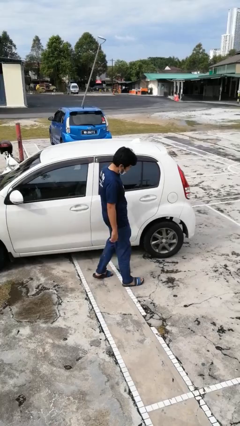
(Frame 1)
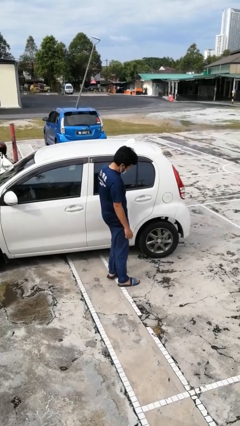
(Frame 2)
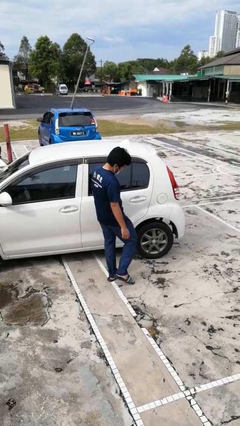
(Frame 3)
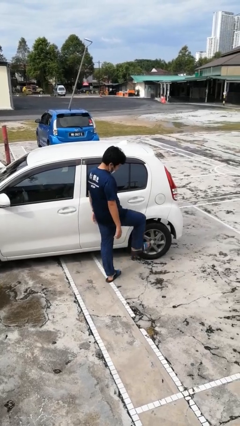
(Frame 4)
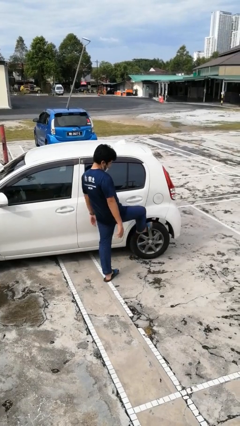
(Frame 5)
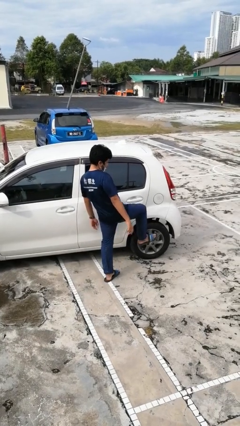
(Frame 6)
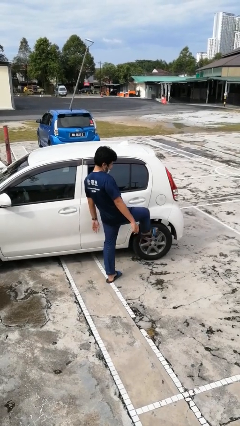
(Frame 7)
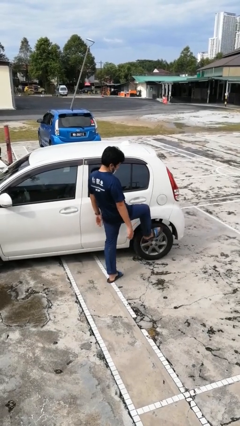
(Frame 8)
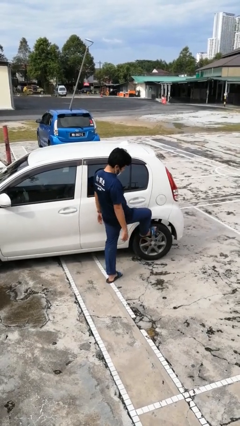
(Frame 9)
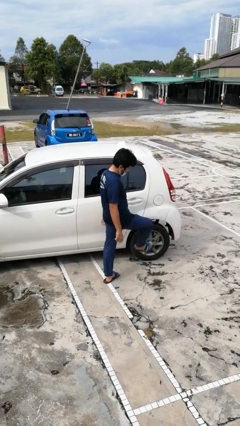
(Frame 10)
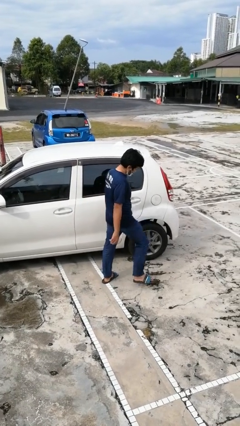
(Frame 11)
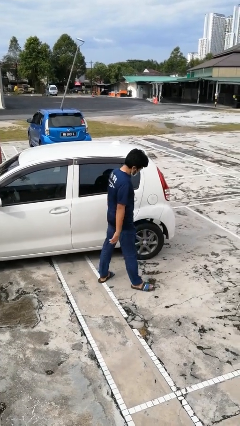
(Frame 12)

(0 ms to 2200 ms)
person kicks car tires

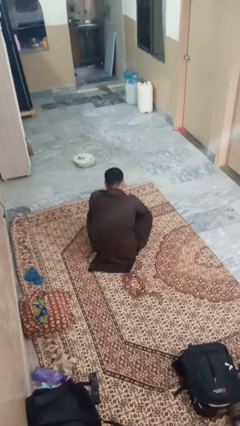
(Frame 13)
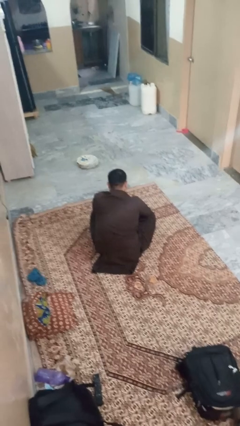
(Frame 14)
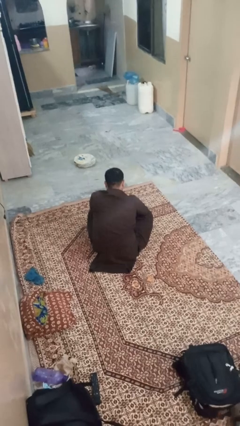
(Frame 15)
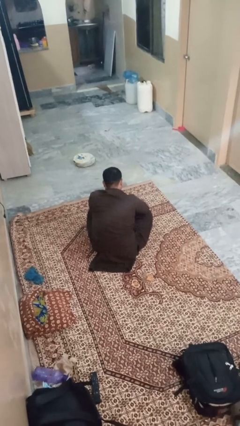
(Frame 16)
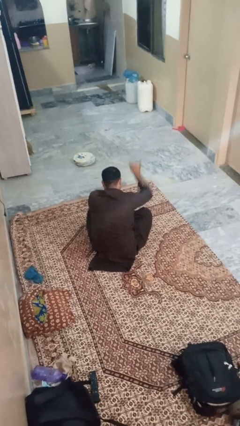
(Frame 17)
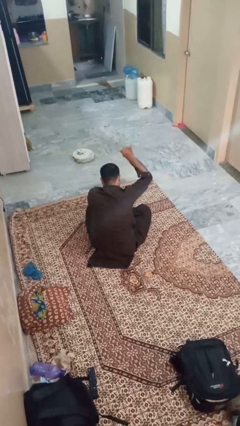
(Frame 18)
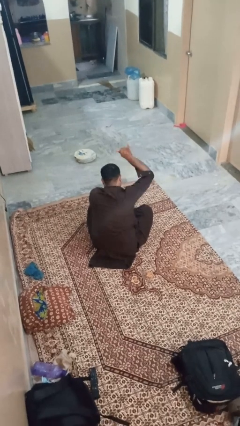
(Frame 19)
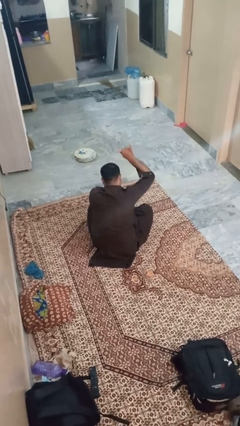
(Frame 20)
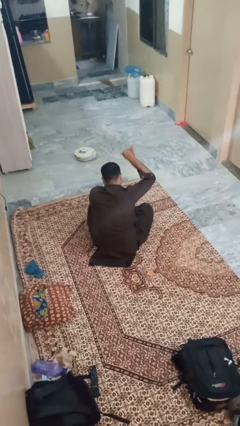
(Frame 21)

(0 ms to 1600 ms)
person gestures hang loose

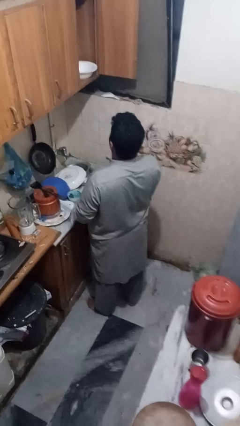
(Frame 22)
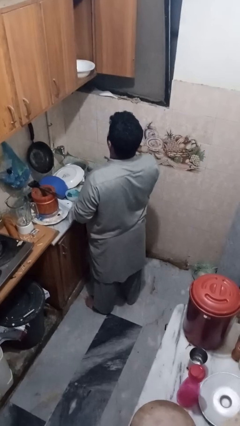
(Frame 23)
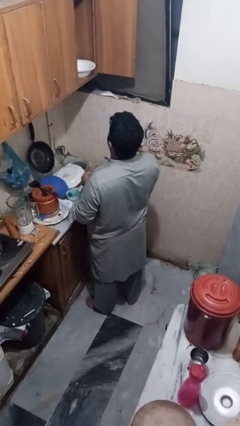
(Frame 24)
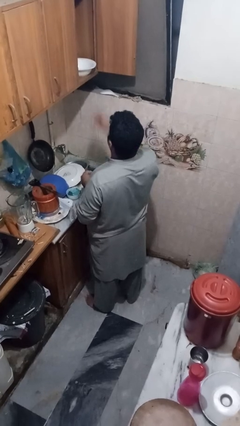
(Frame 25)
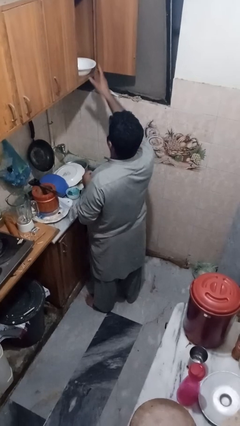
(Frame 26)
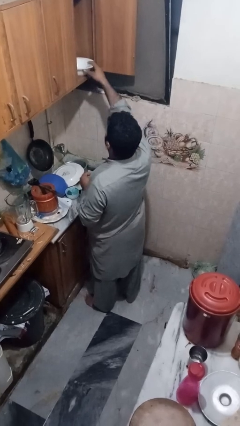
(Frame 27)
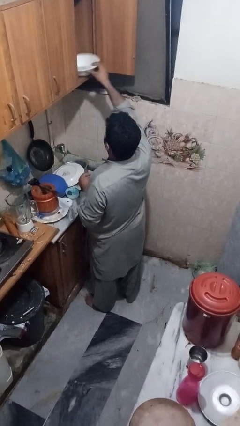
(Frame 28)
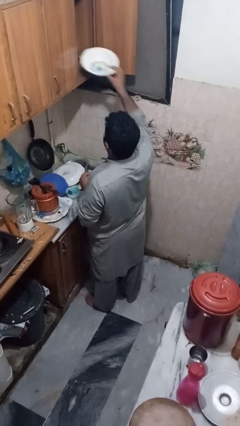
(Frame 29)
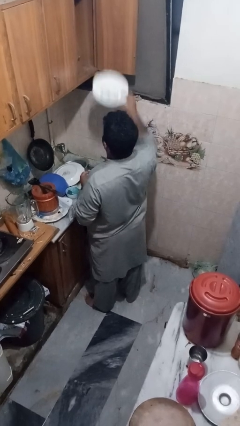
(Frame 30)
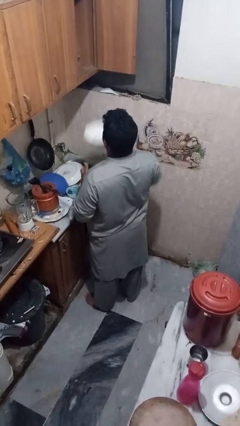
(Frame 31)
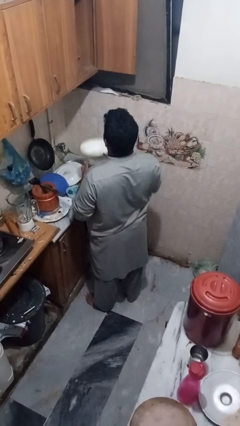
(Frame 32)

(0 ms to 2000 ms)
person takes object from cabinet

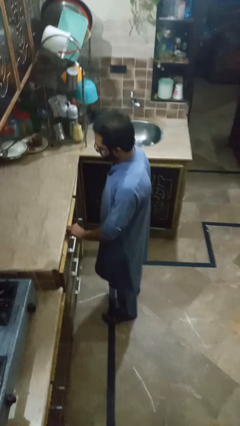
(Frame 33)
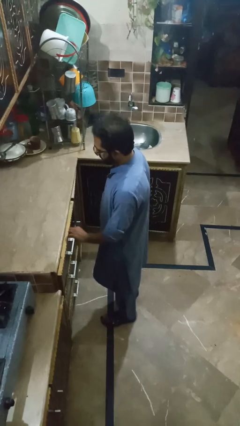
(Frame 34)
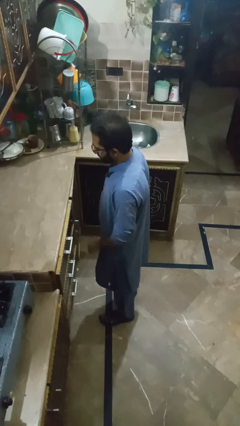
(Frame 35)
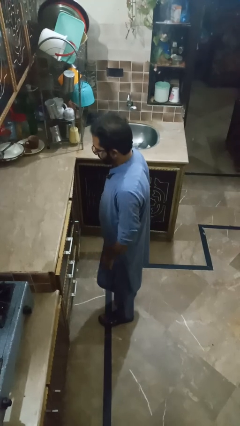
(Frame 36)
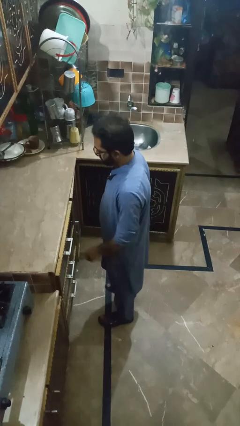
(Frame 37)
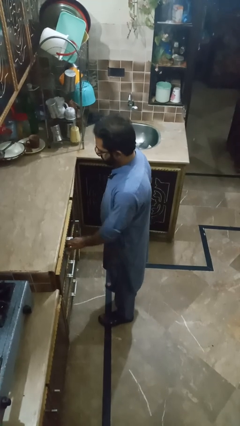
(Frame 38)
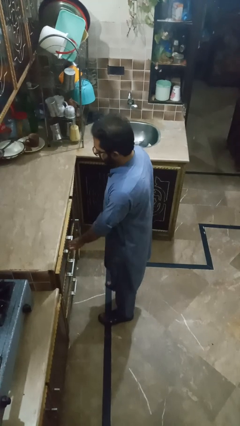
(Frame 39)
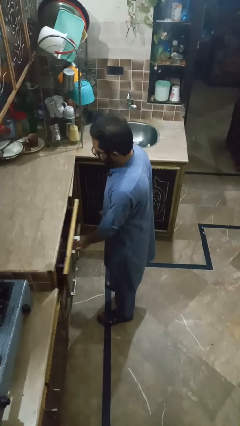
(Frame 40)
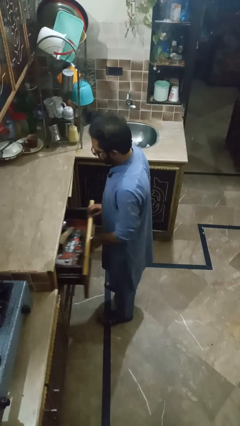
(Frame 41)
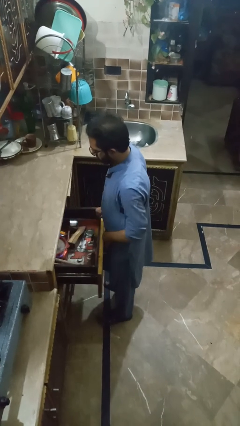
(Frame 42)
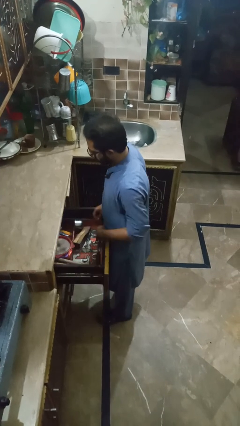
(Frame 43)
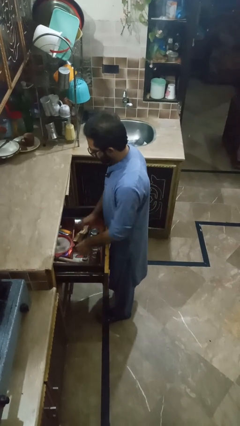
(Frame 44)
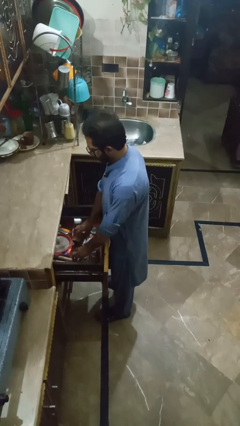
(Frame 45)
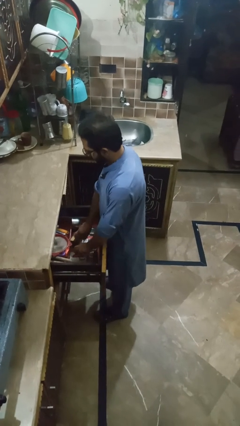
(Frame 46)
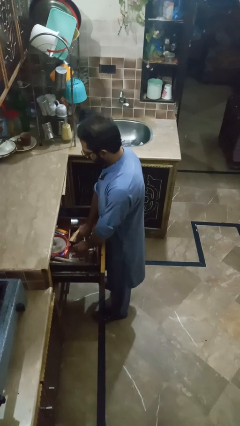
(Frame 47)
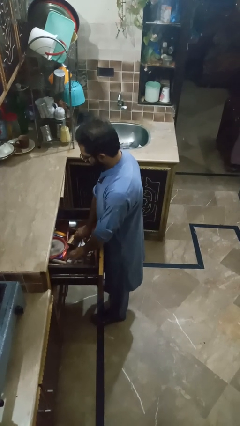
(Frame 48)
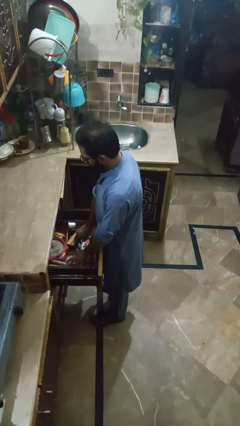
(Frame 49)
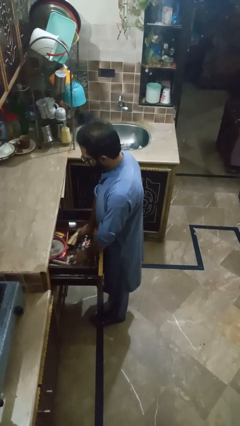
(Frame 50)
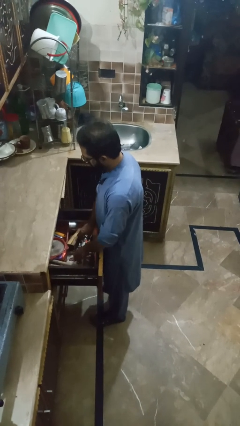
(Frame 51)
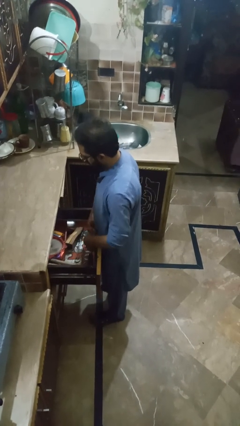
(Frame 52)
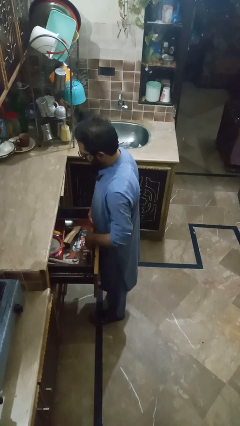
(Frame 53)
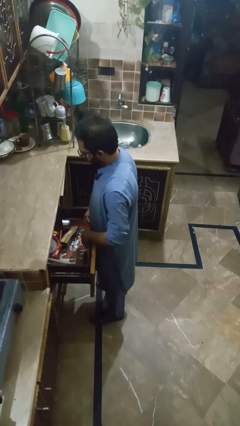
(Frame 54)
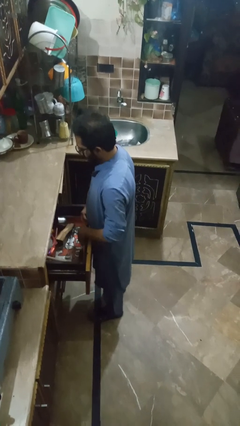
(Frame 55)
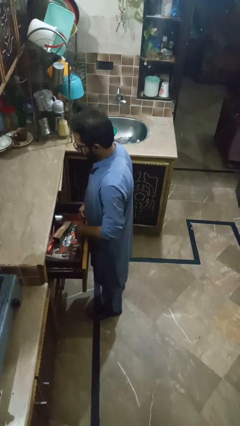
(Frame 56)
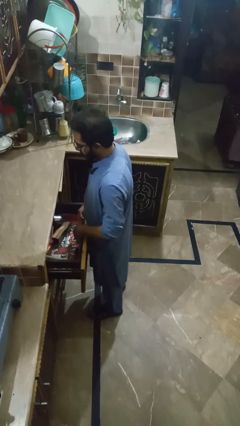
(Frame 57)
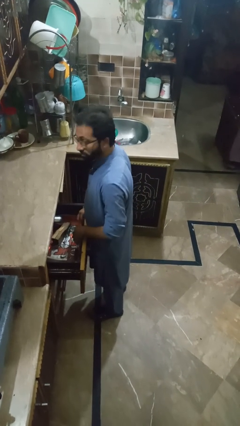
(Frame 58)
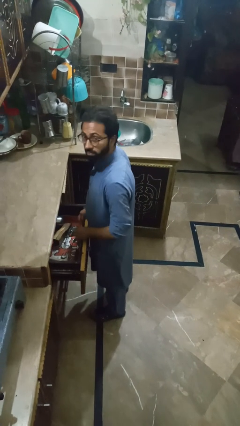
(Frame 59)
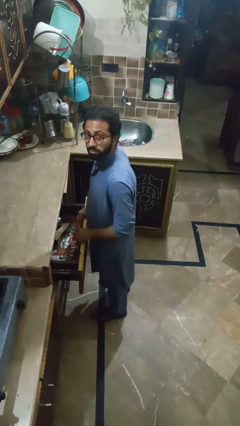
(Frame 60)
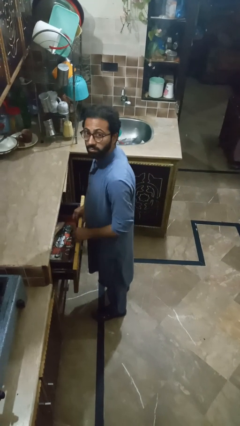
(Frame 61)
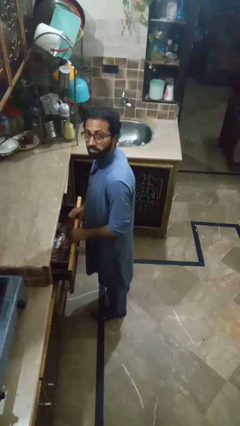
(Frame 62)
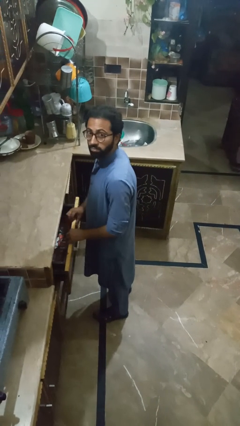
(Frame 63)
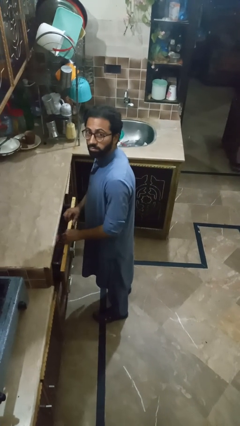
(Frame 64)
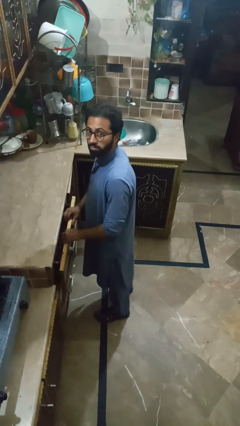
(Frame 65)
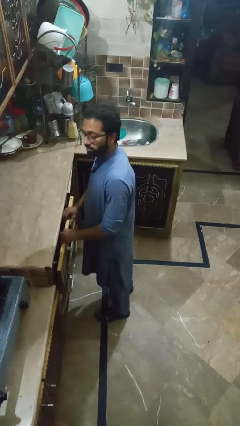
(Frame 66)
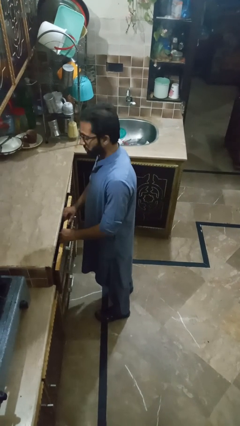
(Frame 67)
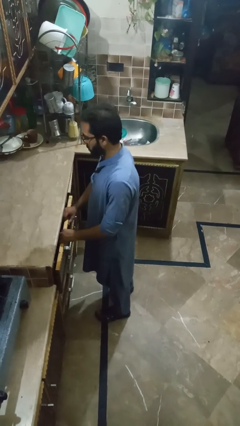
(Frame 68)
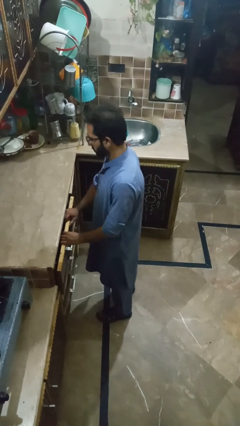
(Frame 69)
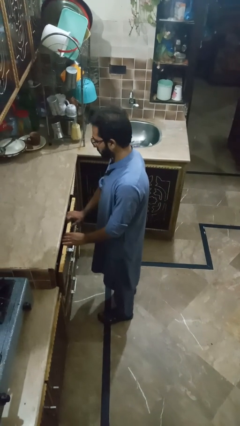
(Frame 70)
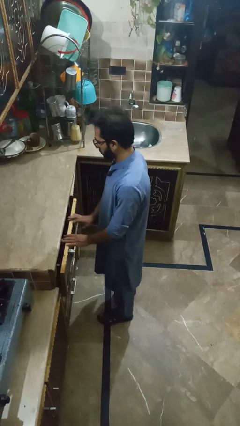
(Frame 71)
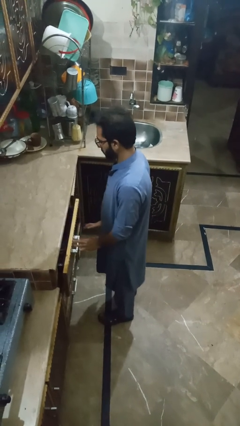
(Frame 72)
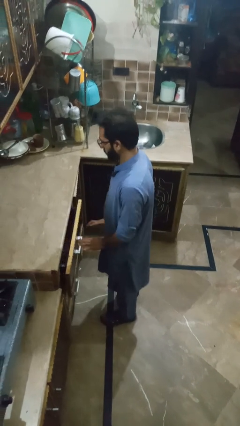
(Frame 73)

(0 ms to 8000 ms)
person searches in kitchen drawer

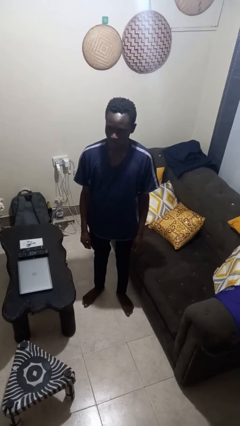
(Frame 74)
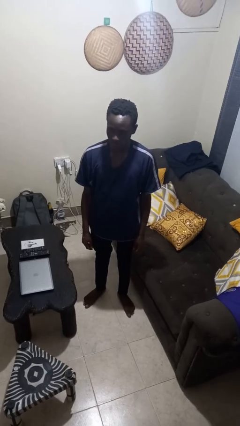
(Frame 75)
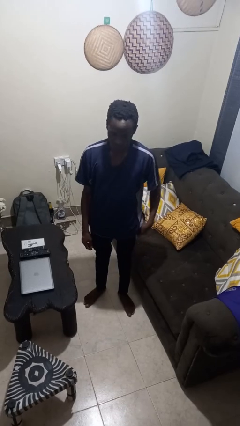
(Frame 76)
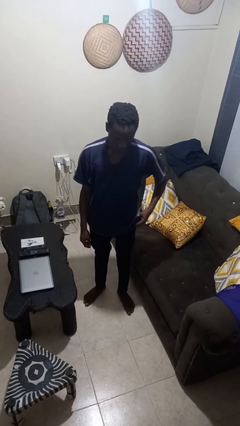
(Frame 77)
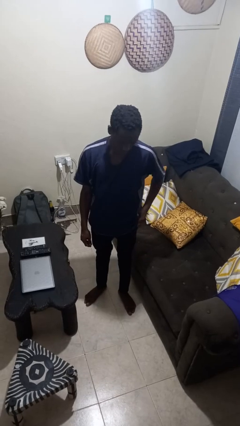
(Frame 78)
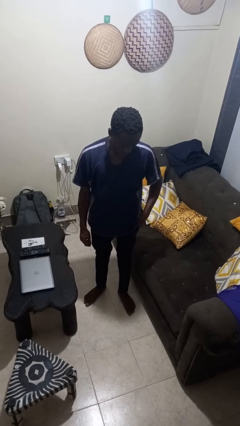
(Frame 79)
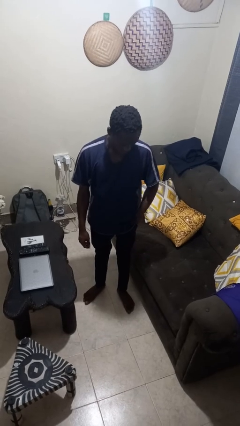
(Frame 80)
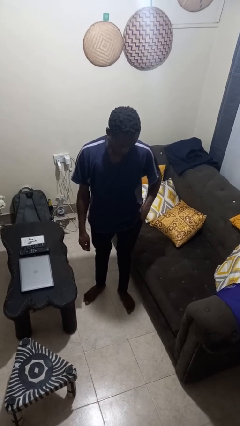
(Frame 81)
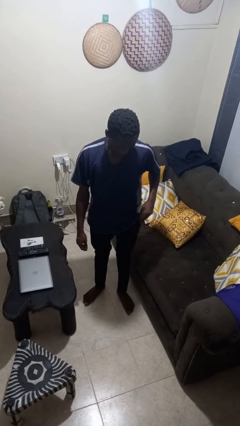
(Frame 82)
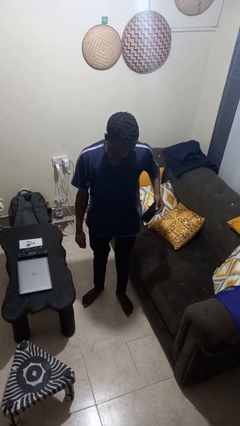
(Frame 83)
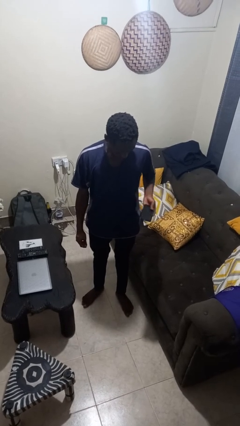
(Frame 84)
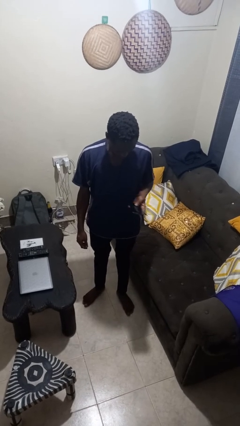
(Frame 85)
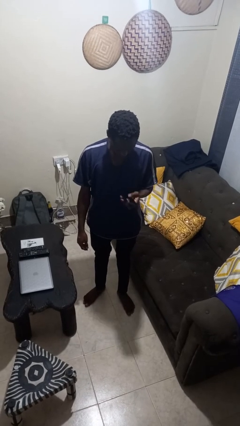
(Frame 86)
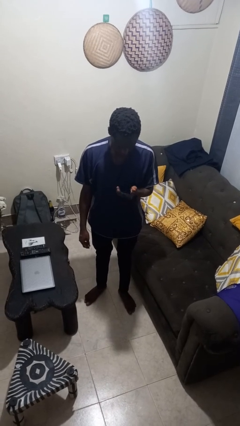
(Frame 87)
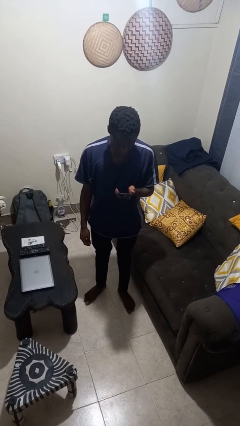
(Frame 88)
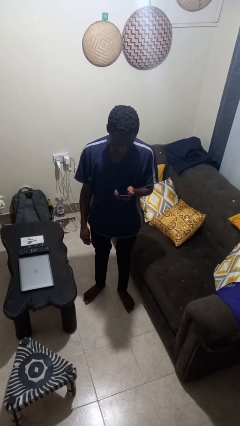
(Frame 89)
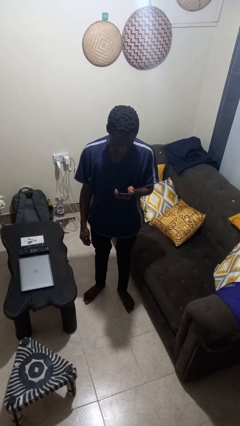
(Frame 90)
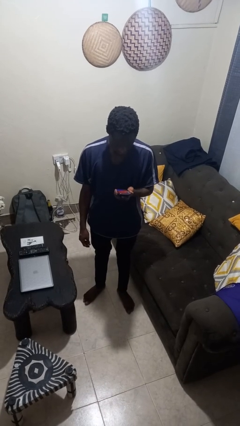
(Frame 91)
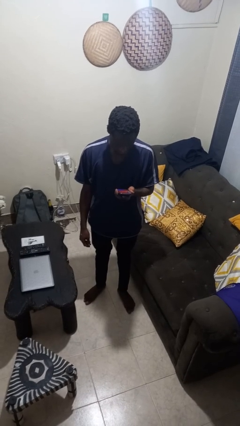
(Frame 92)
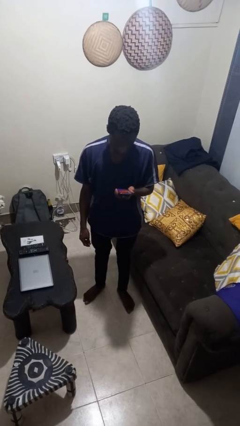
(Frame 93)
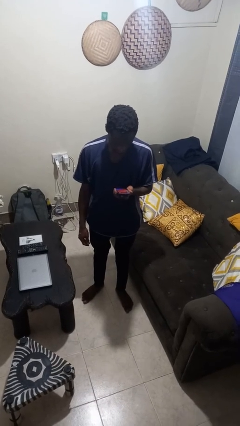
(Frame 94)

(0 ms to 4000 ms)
person takes phone from pocket
